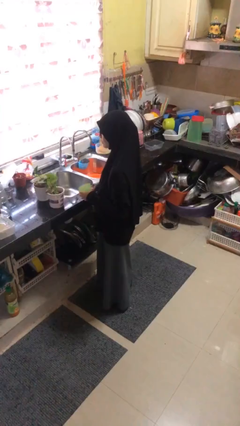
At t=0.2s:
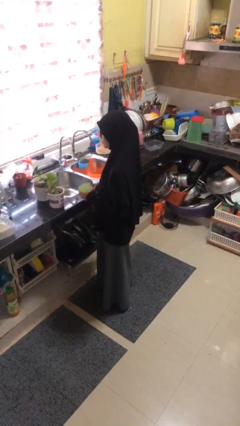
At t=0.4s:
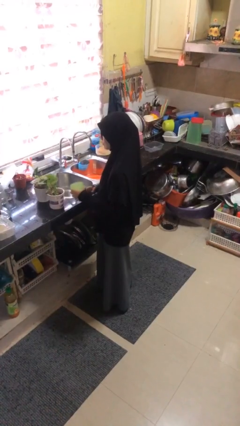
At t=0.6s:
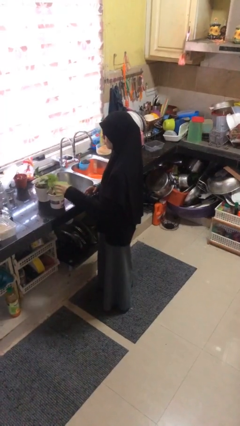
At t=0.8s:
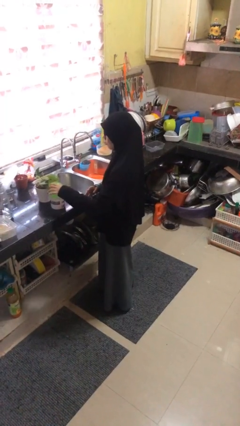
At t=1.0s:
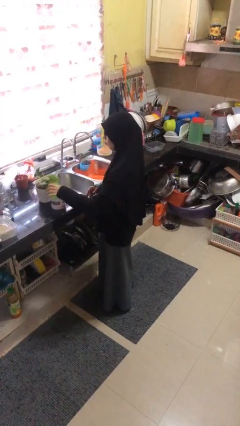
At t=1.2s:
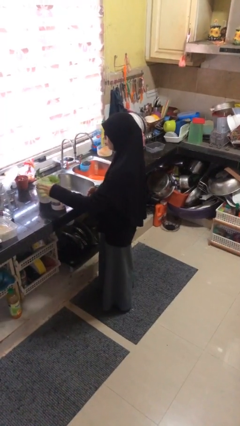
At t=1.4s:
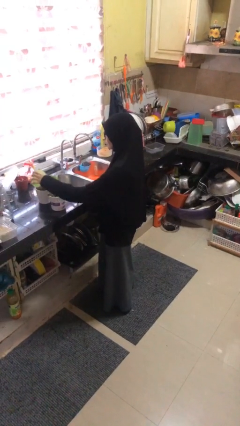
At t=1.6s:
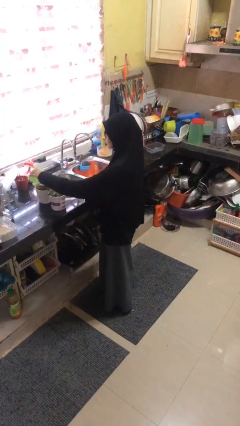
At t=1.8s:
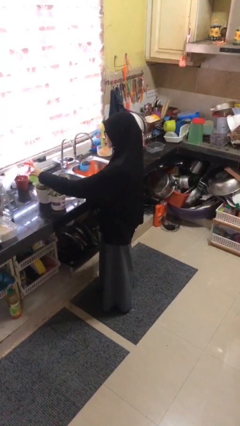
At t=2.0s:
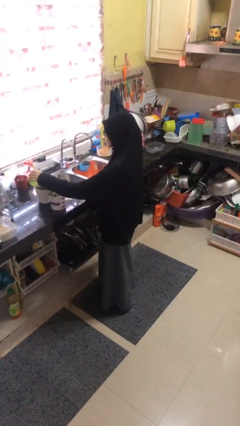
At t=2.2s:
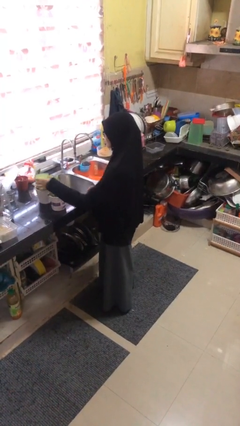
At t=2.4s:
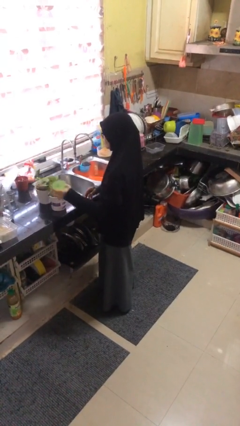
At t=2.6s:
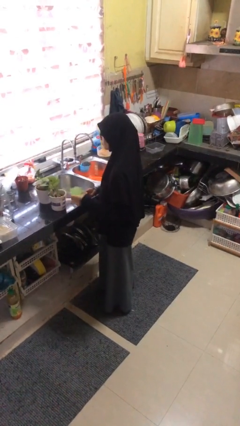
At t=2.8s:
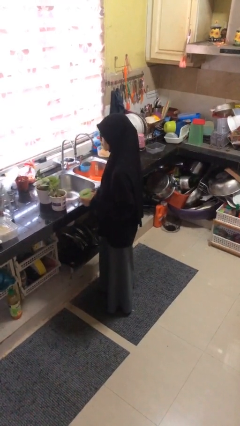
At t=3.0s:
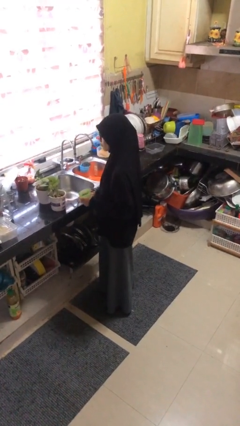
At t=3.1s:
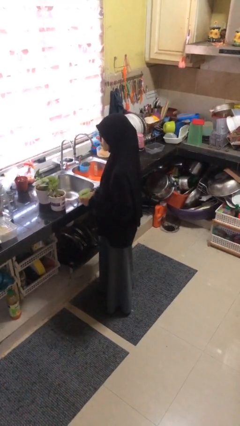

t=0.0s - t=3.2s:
person waters houseplant

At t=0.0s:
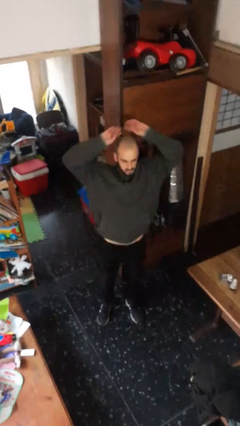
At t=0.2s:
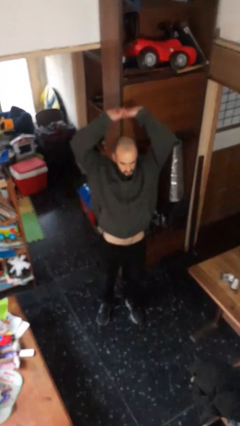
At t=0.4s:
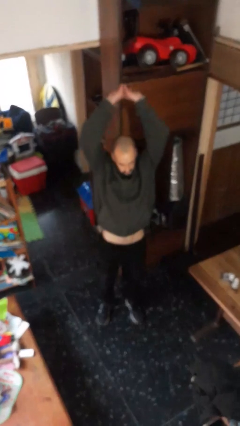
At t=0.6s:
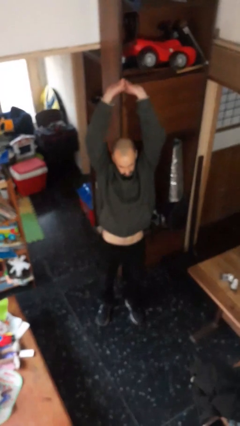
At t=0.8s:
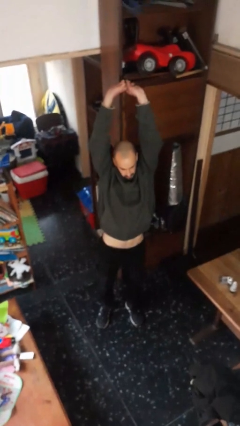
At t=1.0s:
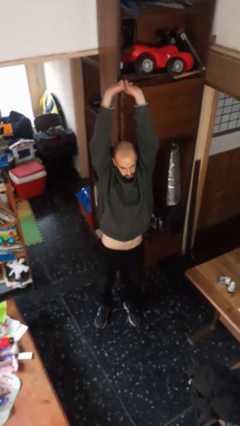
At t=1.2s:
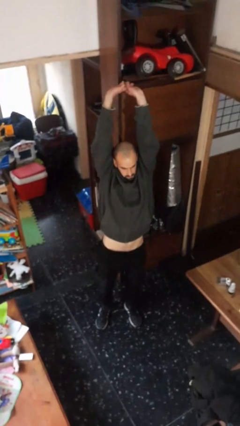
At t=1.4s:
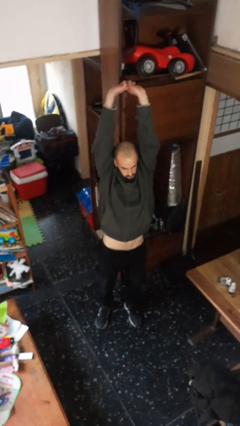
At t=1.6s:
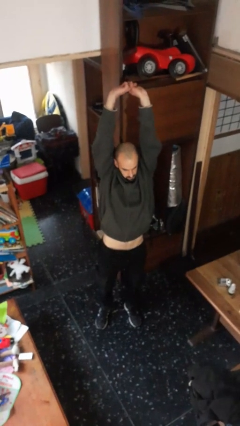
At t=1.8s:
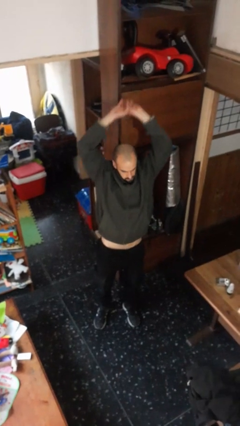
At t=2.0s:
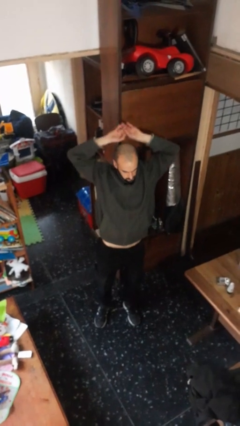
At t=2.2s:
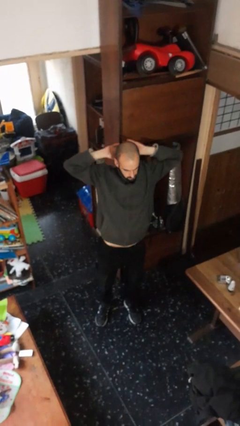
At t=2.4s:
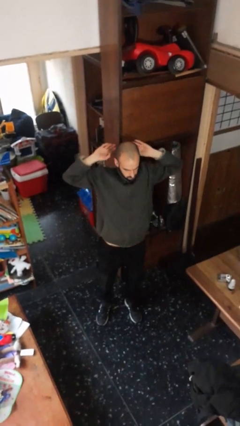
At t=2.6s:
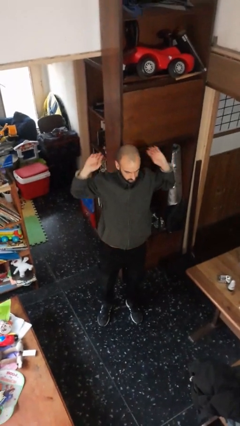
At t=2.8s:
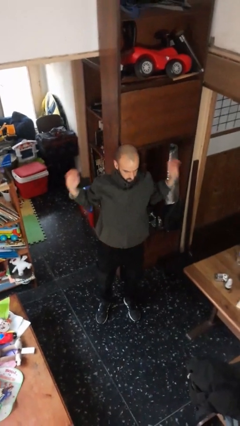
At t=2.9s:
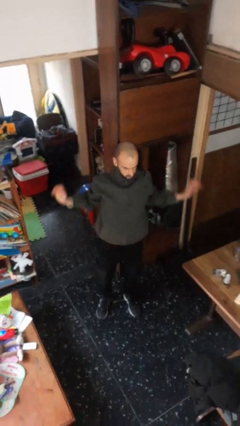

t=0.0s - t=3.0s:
person stretches arms over head

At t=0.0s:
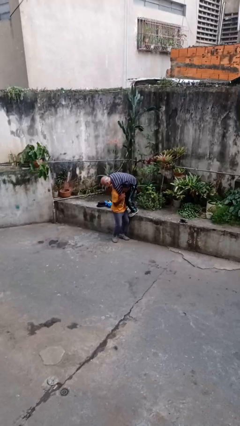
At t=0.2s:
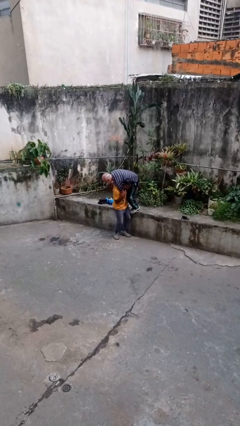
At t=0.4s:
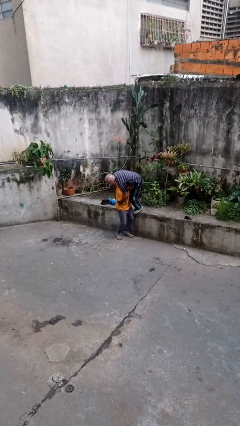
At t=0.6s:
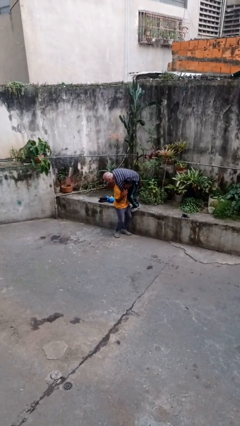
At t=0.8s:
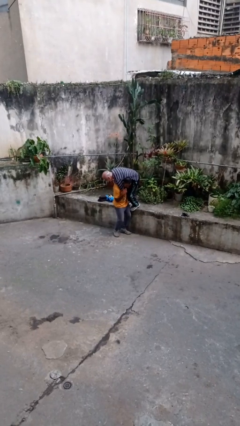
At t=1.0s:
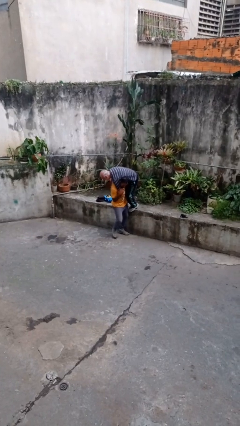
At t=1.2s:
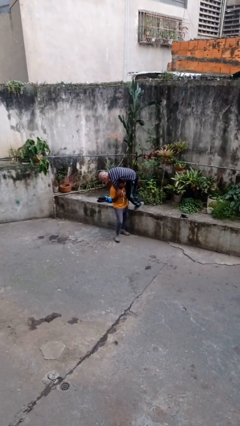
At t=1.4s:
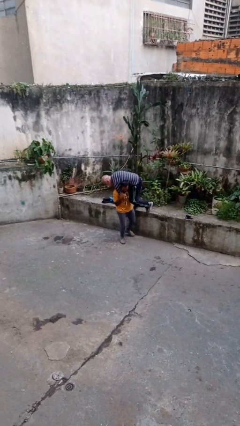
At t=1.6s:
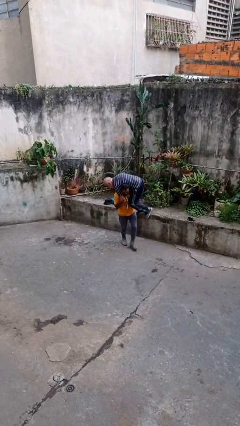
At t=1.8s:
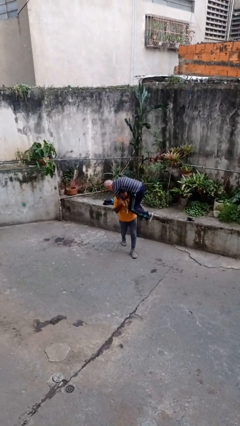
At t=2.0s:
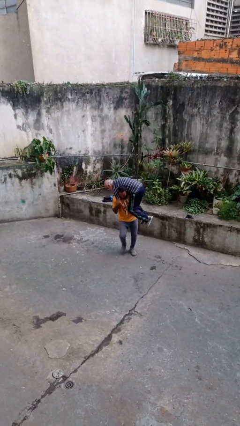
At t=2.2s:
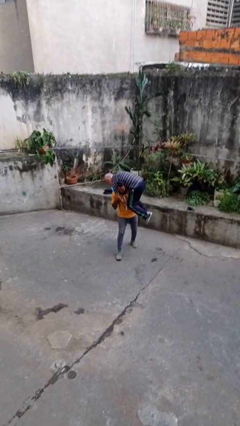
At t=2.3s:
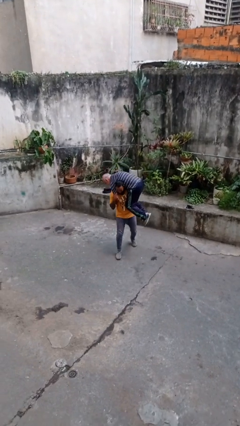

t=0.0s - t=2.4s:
person carries person over shoulder

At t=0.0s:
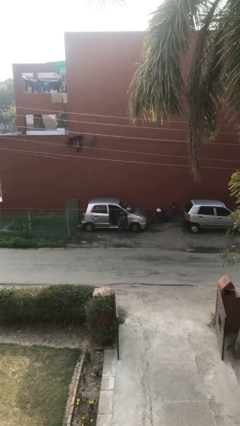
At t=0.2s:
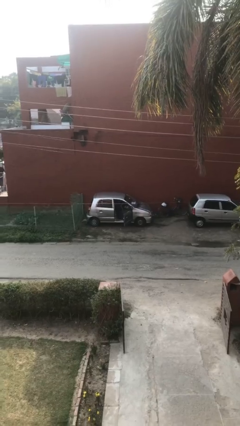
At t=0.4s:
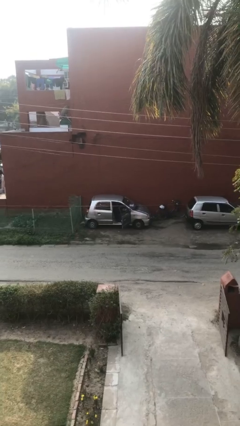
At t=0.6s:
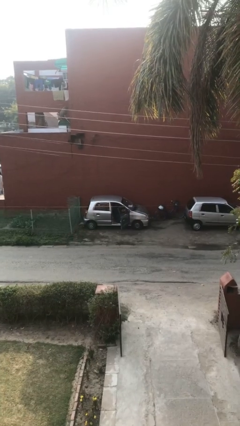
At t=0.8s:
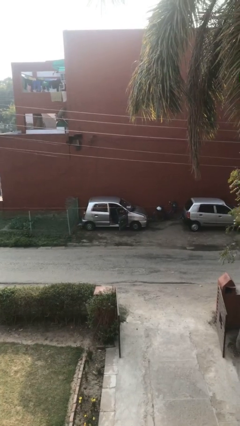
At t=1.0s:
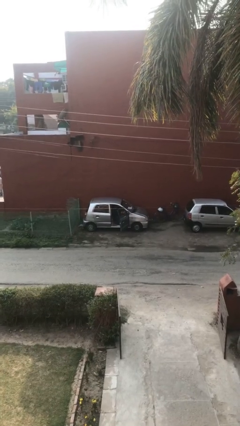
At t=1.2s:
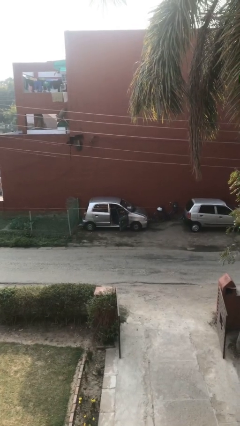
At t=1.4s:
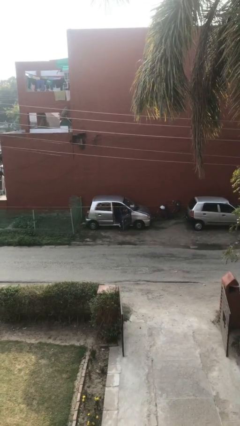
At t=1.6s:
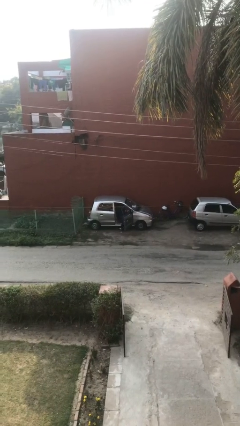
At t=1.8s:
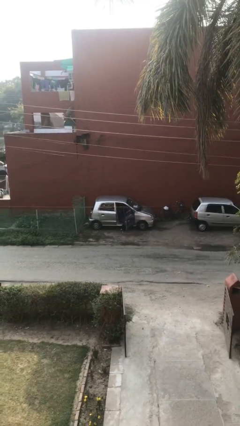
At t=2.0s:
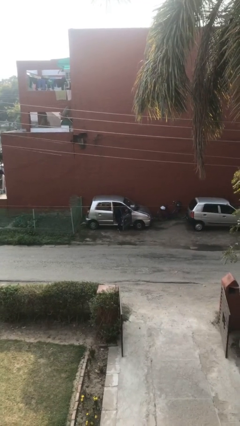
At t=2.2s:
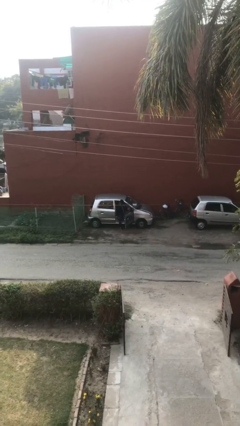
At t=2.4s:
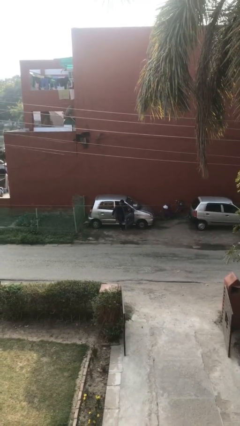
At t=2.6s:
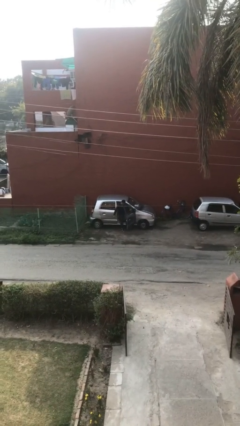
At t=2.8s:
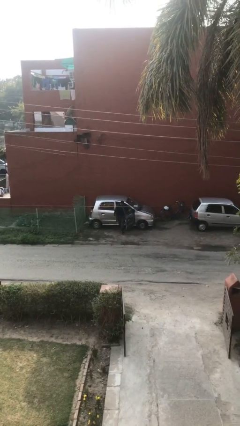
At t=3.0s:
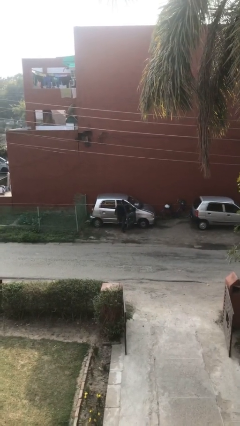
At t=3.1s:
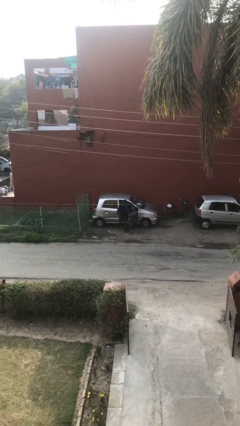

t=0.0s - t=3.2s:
person exits car

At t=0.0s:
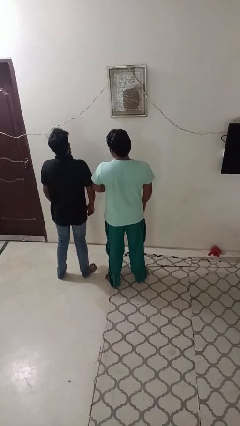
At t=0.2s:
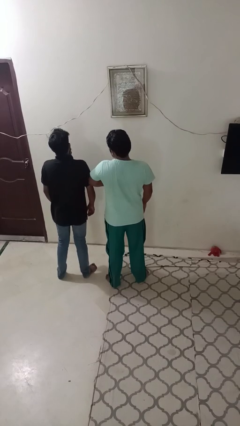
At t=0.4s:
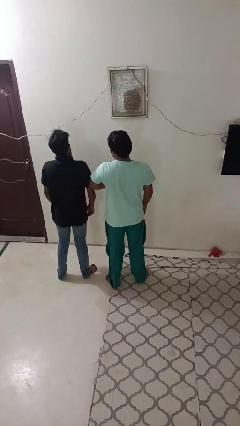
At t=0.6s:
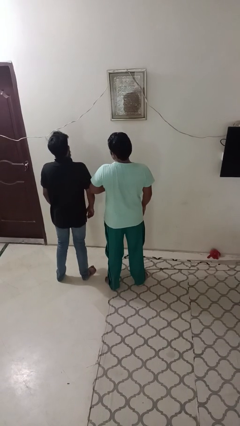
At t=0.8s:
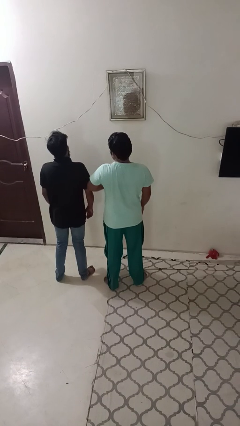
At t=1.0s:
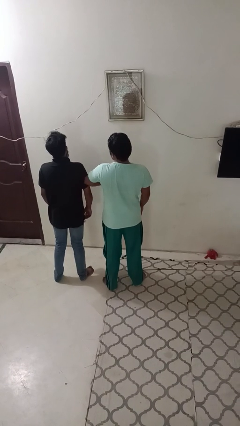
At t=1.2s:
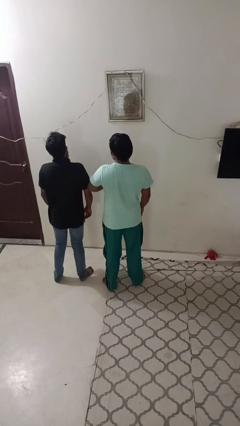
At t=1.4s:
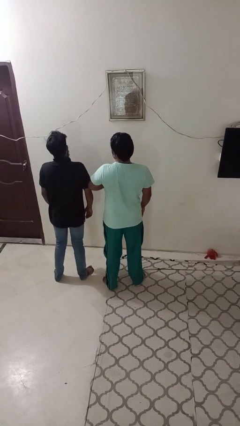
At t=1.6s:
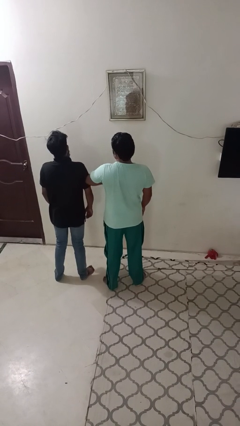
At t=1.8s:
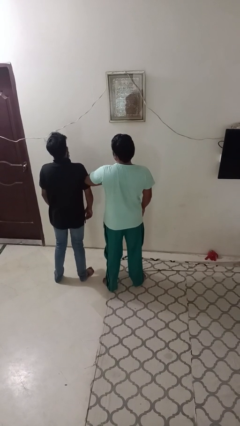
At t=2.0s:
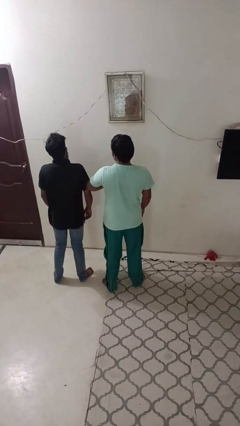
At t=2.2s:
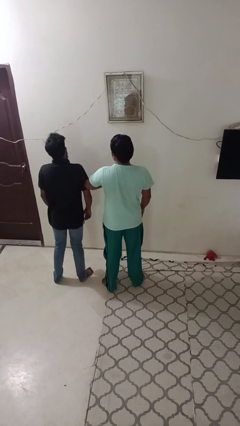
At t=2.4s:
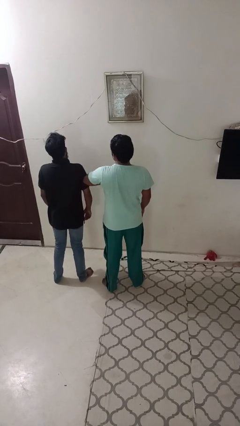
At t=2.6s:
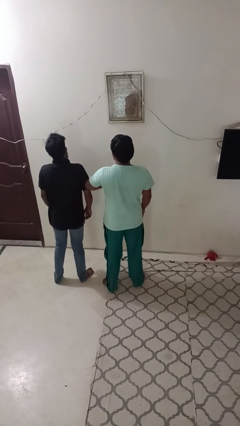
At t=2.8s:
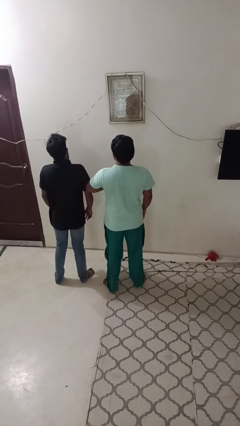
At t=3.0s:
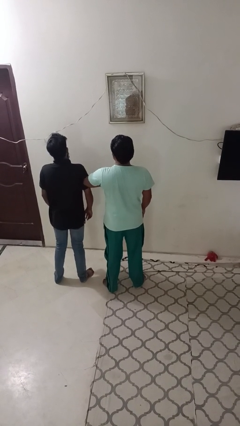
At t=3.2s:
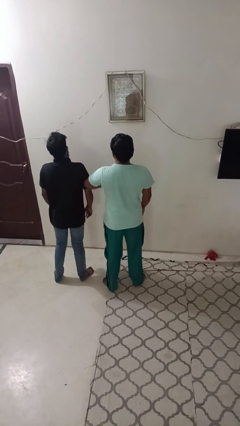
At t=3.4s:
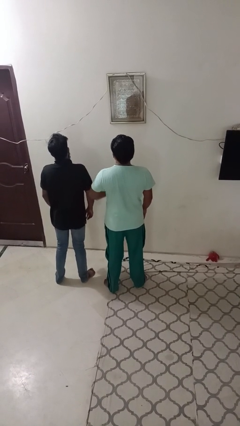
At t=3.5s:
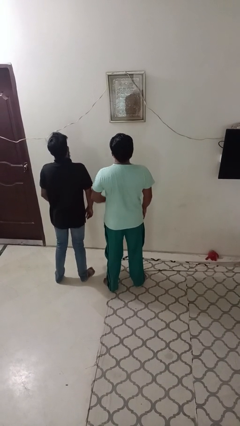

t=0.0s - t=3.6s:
person nudges person with elbow

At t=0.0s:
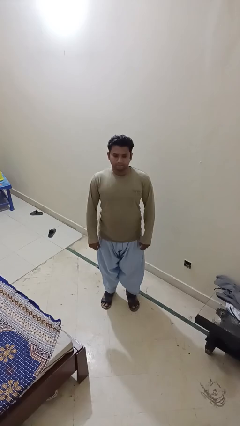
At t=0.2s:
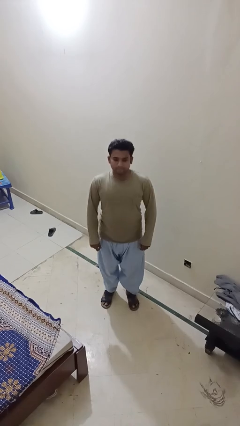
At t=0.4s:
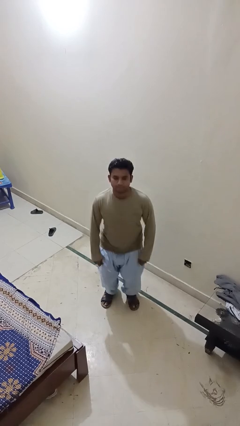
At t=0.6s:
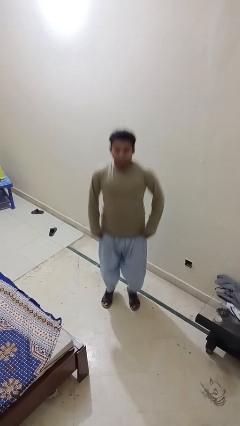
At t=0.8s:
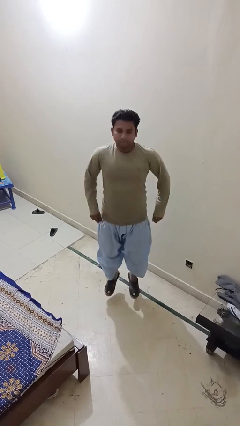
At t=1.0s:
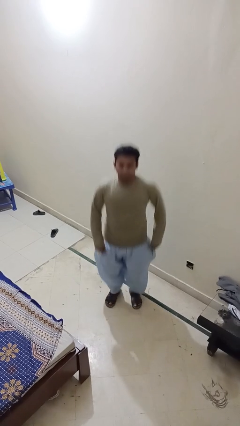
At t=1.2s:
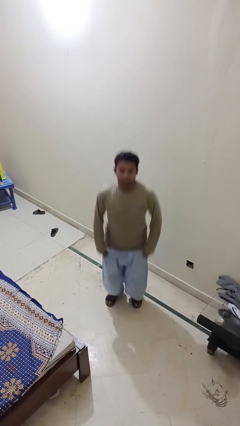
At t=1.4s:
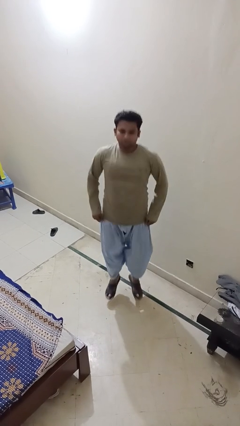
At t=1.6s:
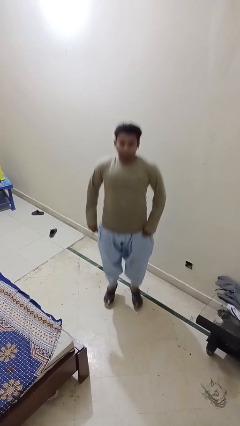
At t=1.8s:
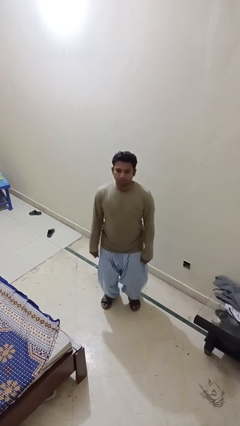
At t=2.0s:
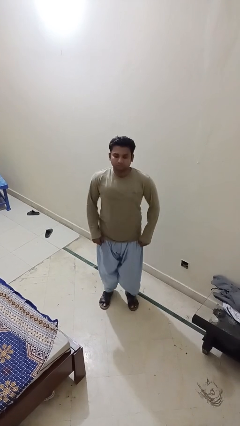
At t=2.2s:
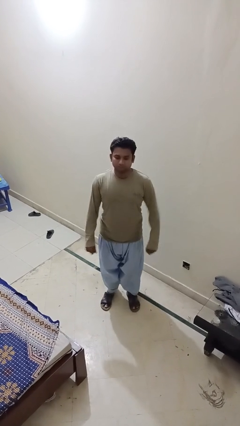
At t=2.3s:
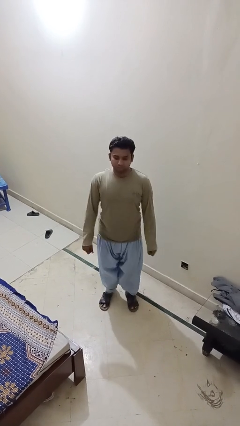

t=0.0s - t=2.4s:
person jumps
